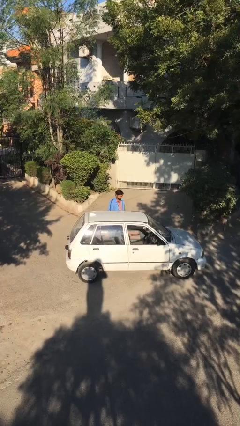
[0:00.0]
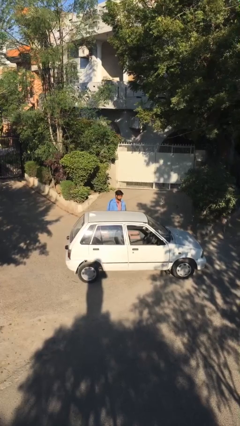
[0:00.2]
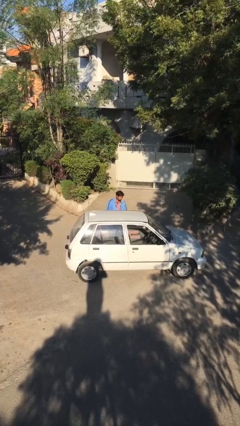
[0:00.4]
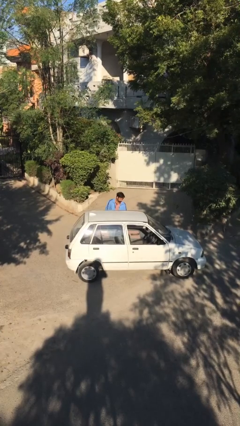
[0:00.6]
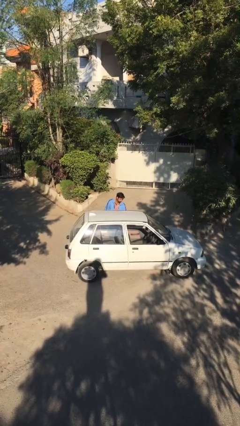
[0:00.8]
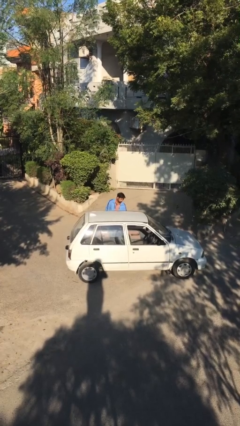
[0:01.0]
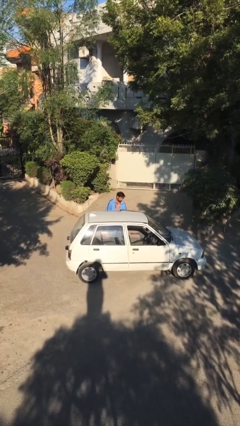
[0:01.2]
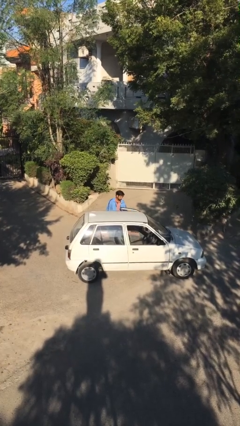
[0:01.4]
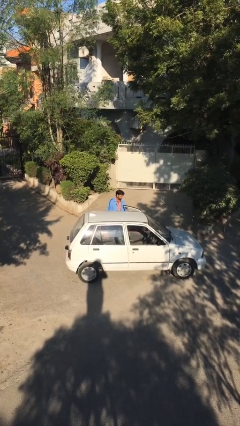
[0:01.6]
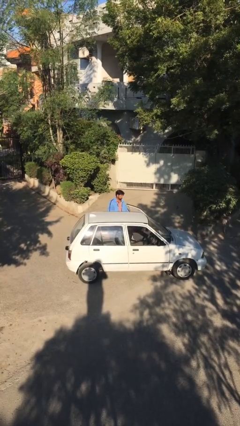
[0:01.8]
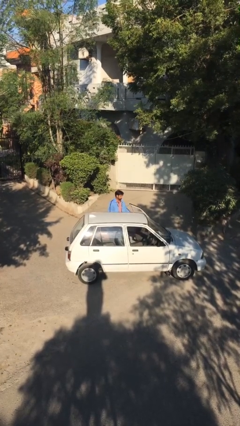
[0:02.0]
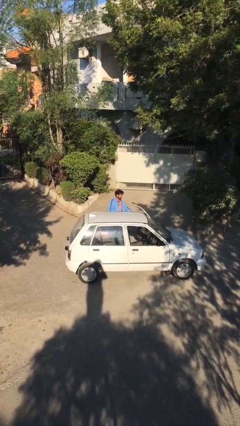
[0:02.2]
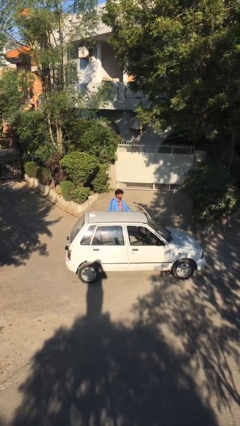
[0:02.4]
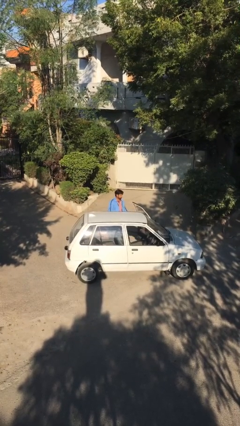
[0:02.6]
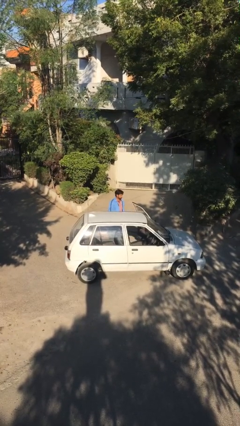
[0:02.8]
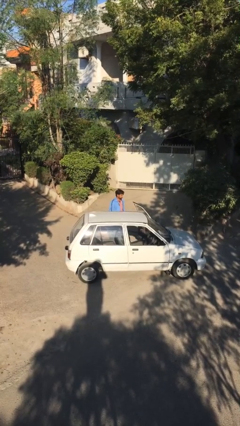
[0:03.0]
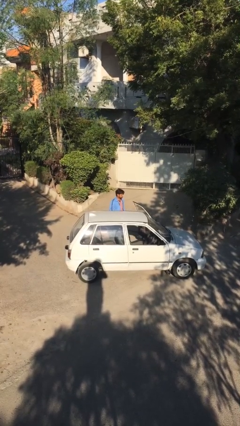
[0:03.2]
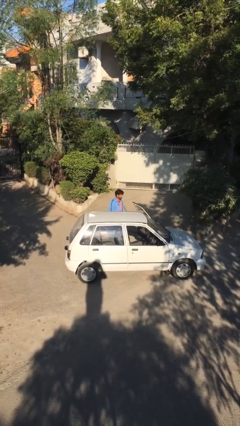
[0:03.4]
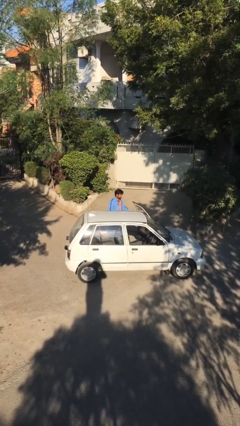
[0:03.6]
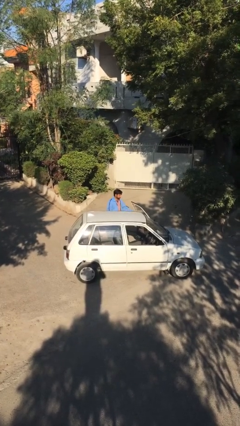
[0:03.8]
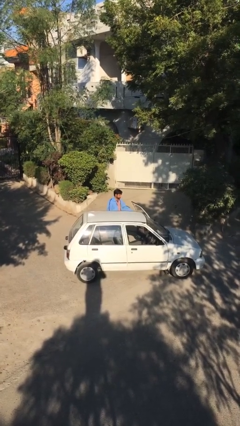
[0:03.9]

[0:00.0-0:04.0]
person opens car door

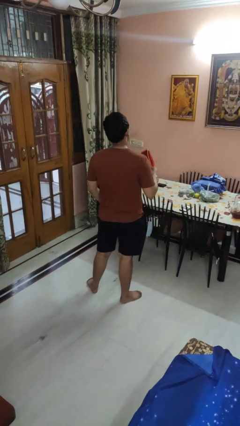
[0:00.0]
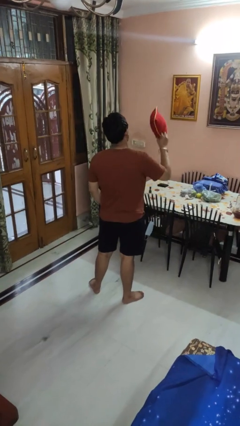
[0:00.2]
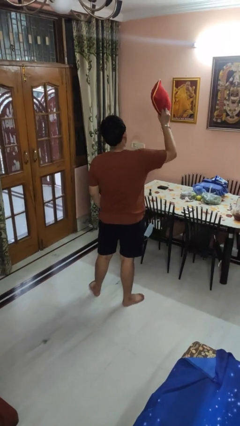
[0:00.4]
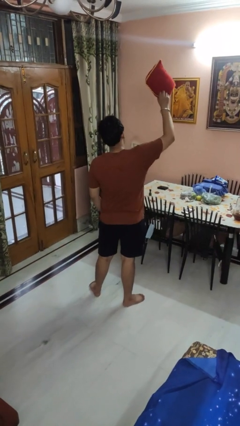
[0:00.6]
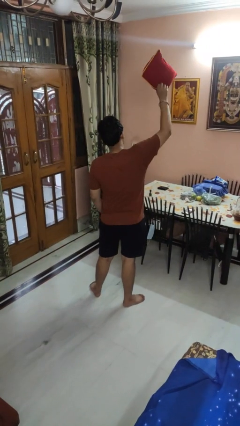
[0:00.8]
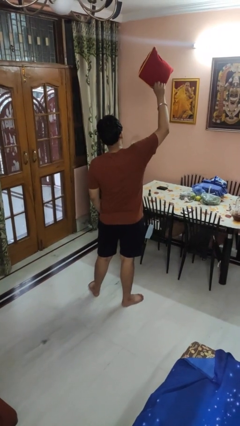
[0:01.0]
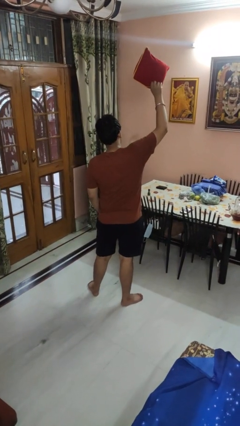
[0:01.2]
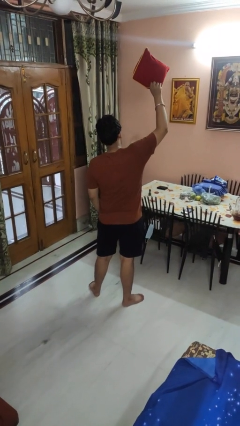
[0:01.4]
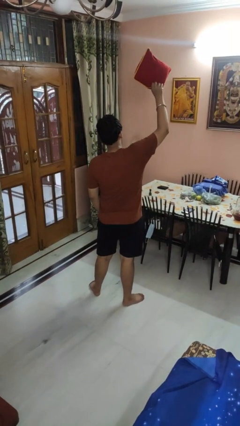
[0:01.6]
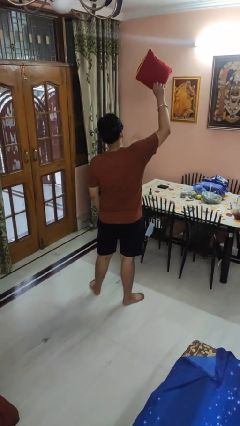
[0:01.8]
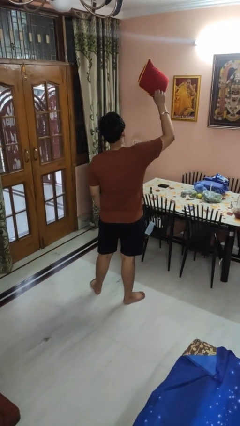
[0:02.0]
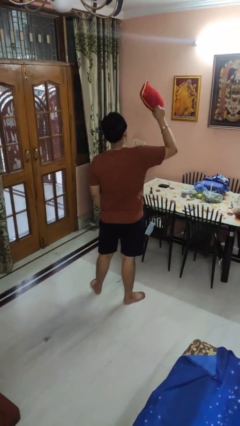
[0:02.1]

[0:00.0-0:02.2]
person holds object above head

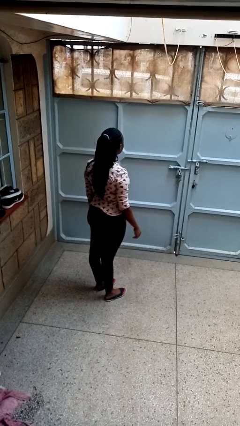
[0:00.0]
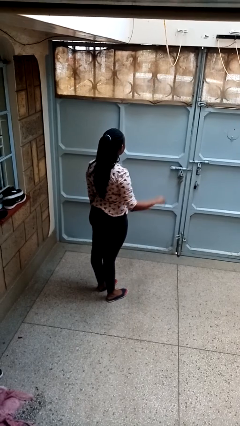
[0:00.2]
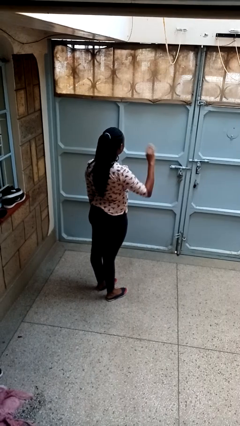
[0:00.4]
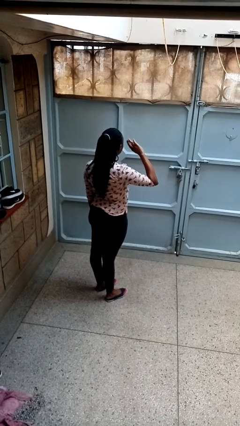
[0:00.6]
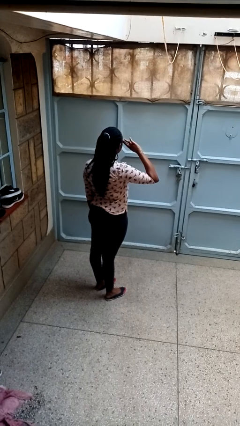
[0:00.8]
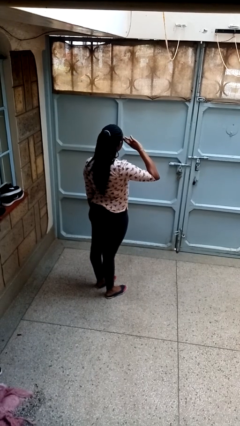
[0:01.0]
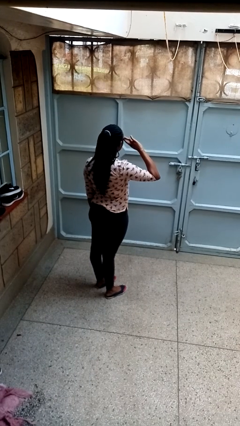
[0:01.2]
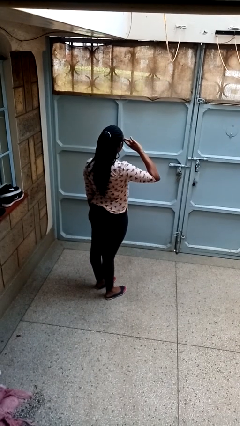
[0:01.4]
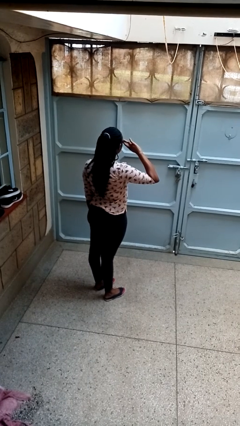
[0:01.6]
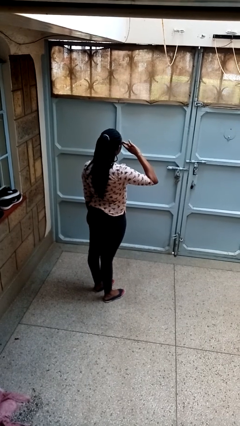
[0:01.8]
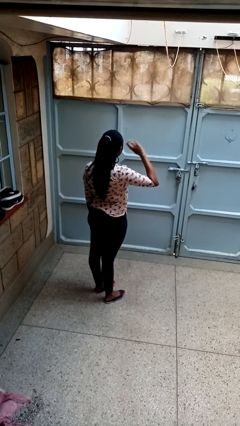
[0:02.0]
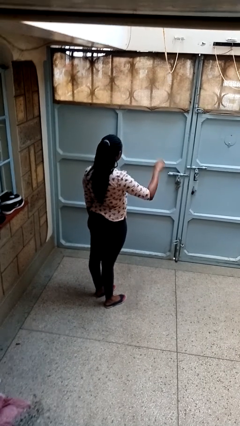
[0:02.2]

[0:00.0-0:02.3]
person salutes

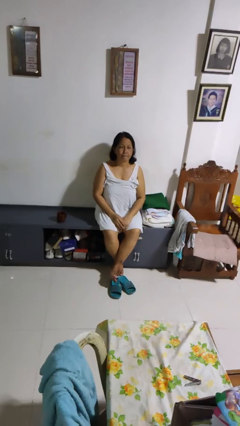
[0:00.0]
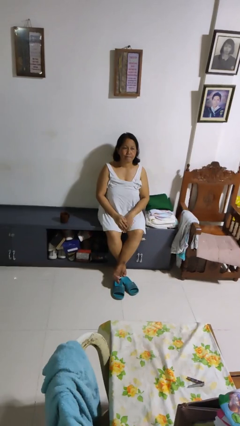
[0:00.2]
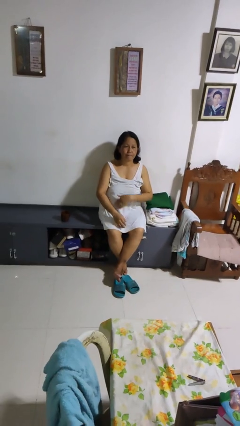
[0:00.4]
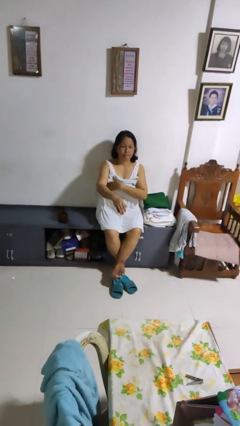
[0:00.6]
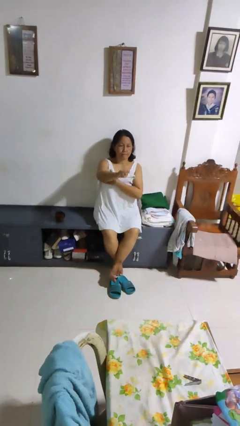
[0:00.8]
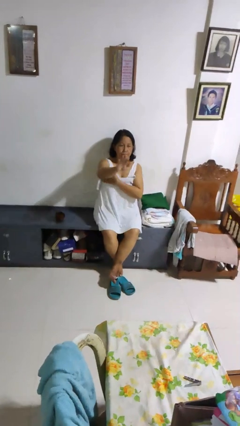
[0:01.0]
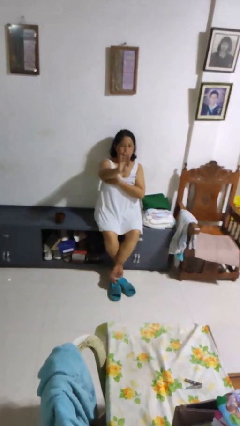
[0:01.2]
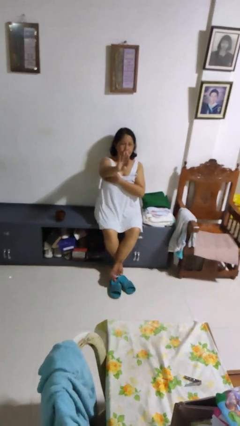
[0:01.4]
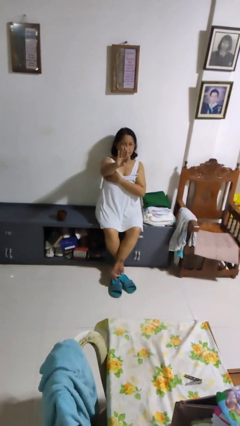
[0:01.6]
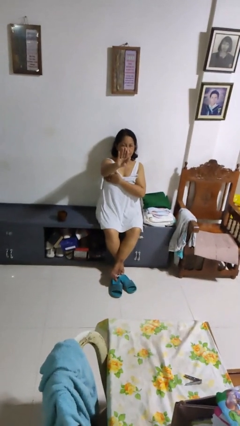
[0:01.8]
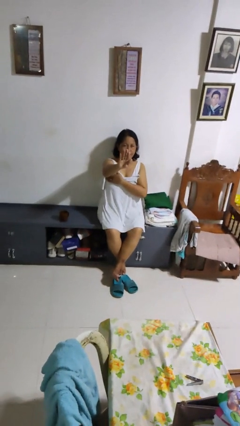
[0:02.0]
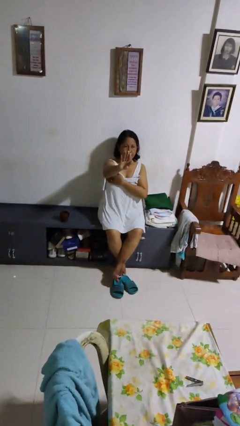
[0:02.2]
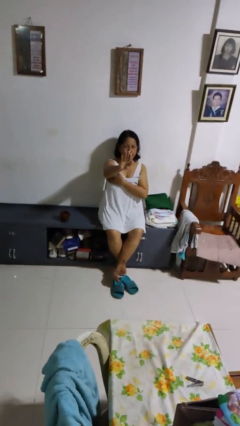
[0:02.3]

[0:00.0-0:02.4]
person gestures stop

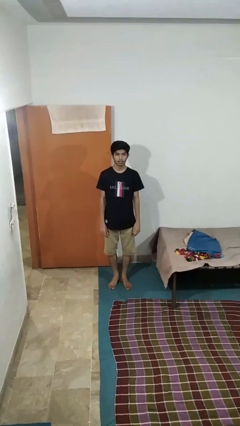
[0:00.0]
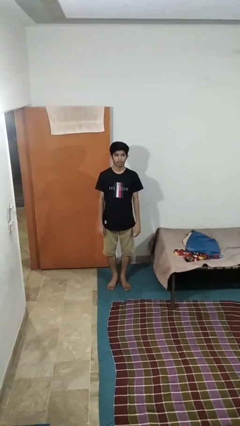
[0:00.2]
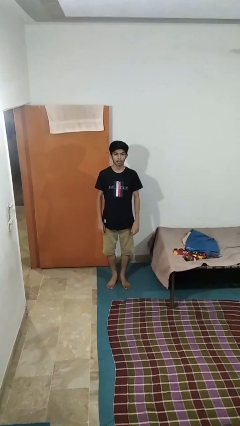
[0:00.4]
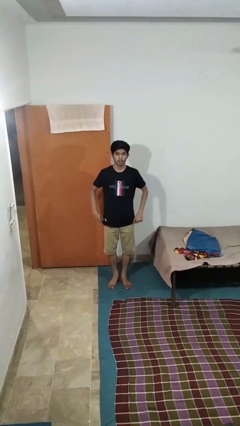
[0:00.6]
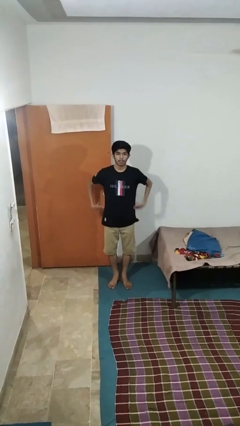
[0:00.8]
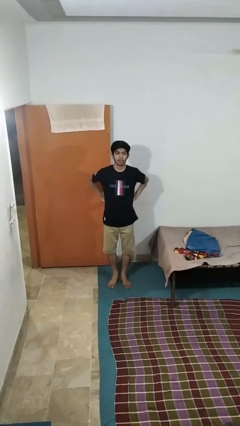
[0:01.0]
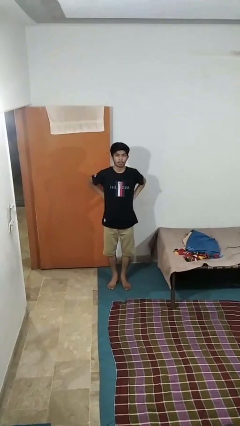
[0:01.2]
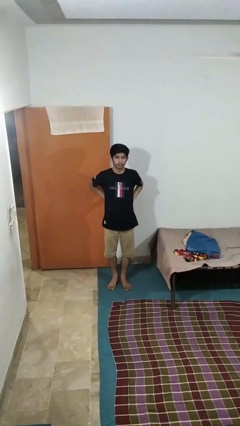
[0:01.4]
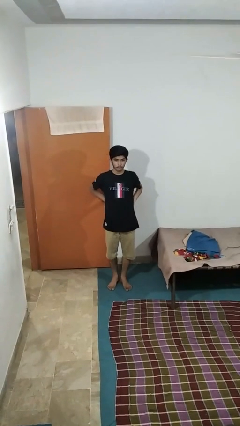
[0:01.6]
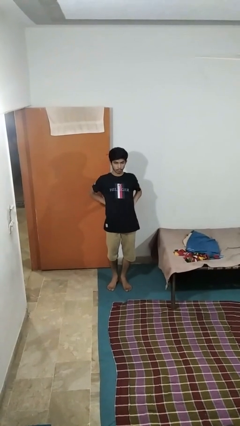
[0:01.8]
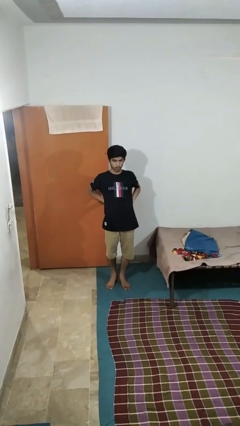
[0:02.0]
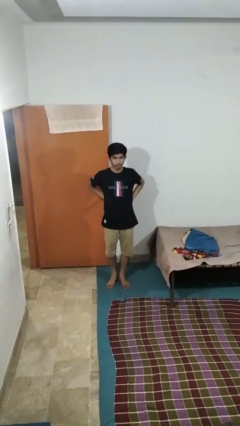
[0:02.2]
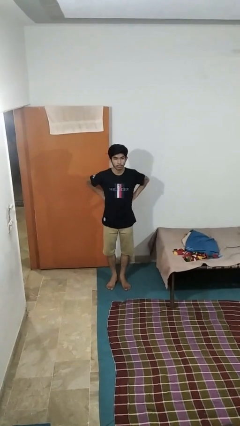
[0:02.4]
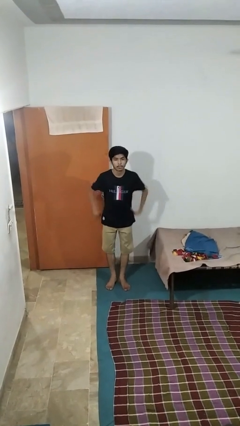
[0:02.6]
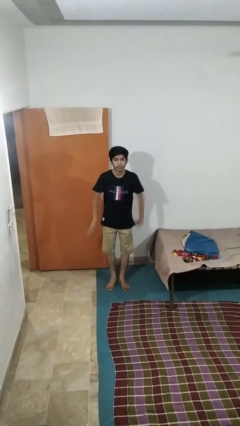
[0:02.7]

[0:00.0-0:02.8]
person stretches back

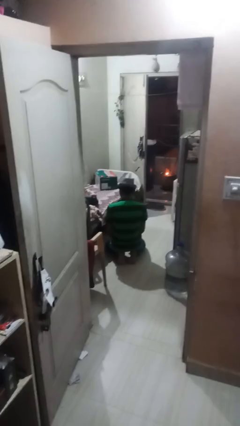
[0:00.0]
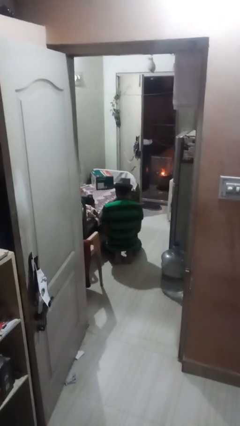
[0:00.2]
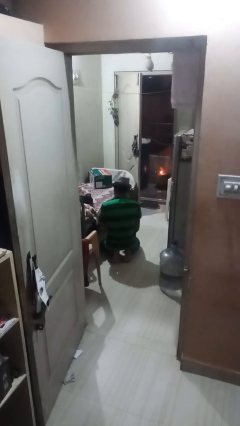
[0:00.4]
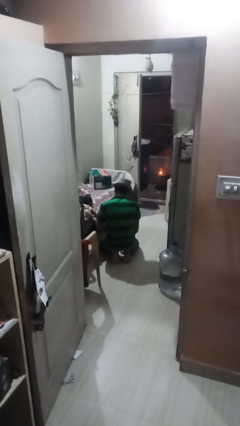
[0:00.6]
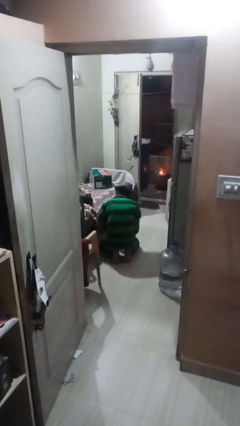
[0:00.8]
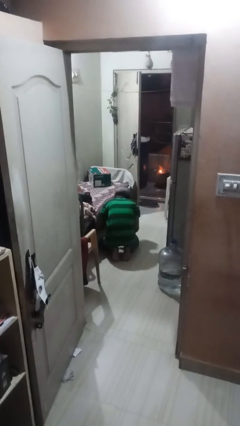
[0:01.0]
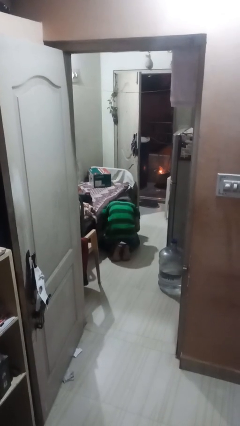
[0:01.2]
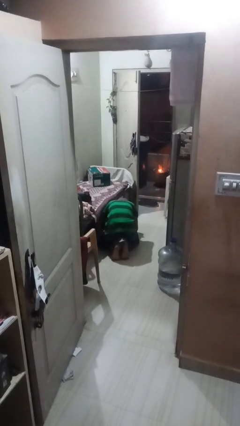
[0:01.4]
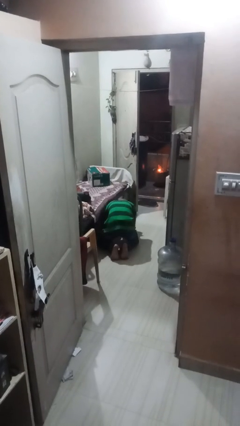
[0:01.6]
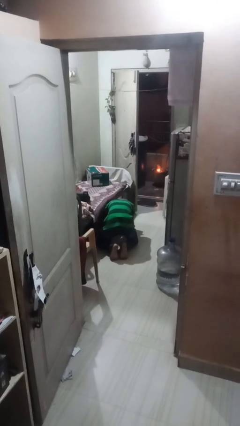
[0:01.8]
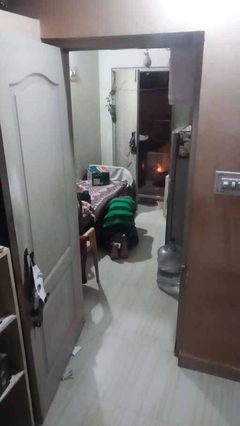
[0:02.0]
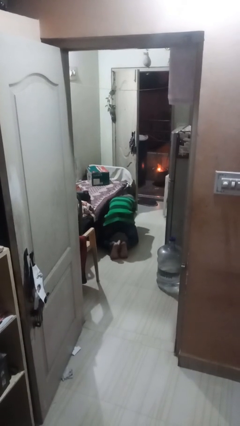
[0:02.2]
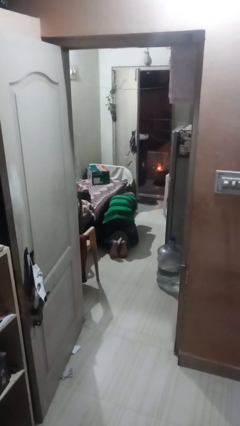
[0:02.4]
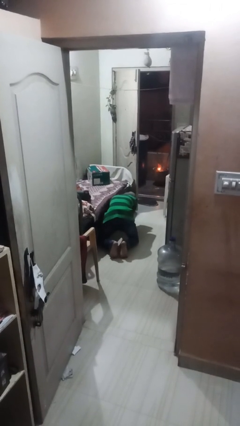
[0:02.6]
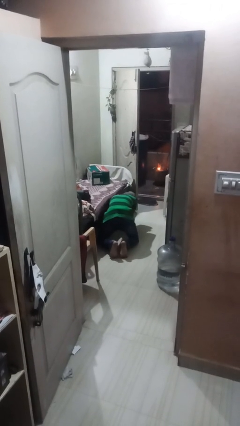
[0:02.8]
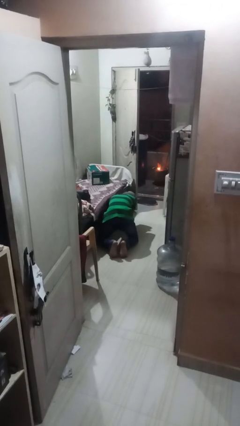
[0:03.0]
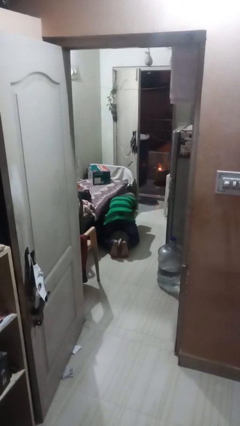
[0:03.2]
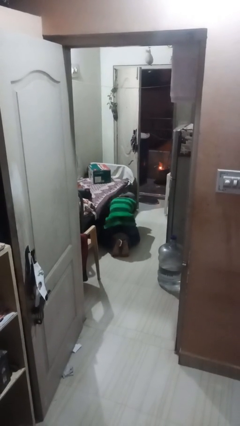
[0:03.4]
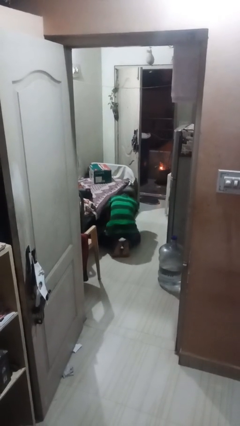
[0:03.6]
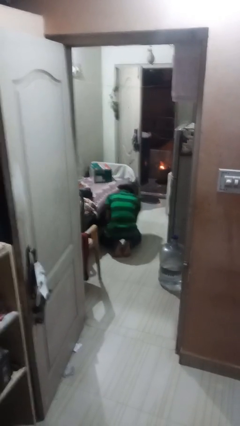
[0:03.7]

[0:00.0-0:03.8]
person searches under bed
